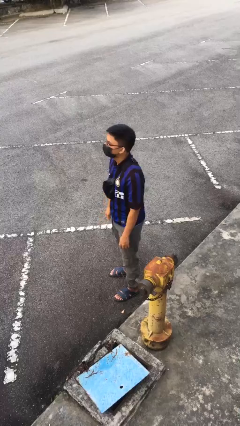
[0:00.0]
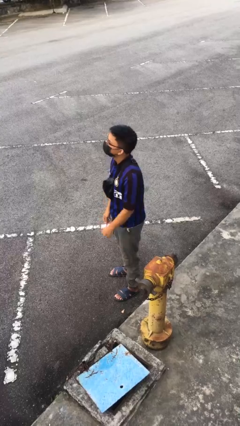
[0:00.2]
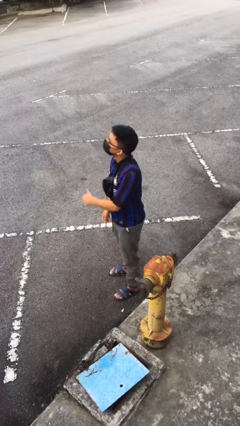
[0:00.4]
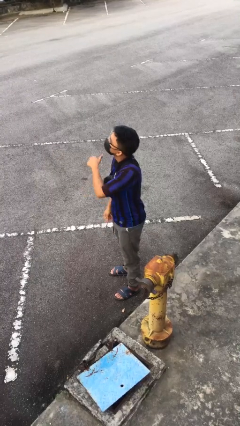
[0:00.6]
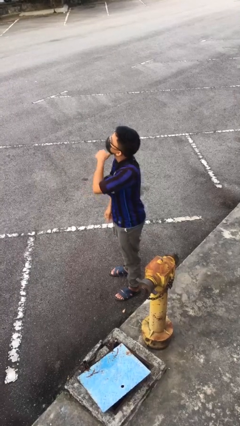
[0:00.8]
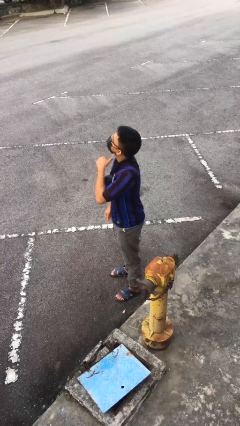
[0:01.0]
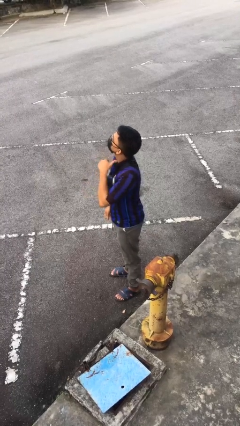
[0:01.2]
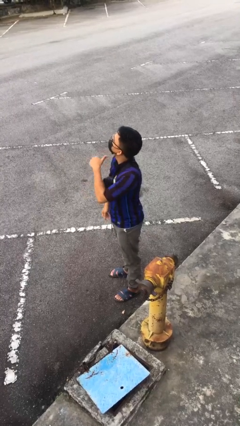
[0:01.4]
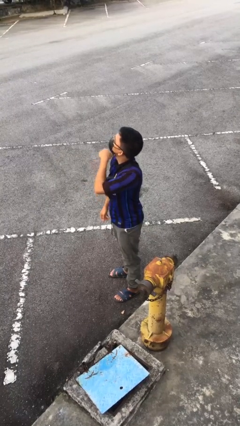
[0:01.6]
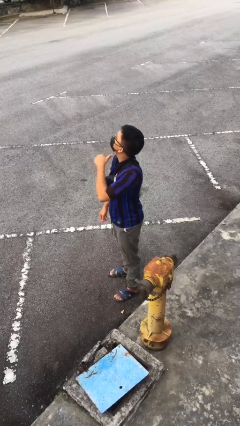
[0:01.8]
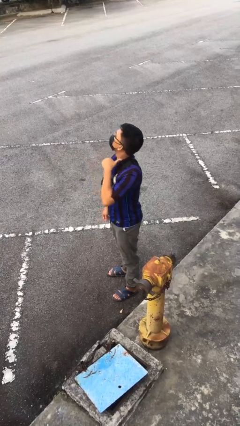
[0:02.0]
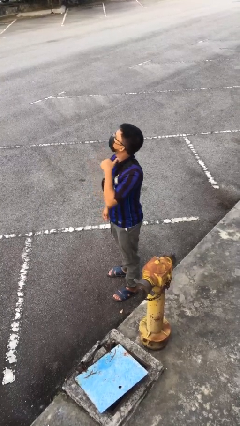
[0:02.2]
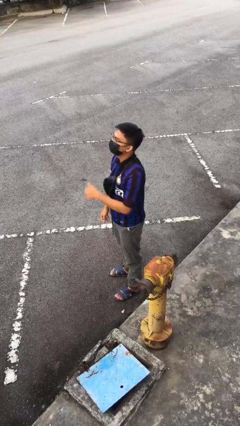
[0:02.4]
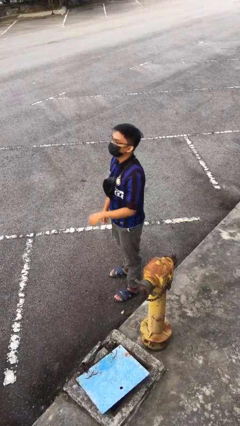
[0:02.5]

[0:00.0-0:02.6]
person gestures cut

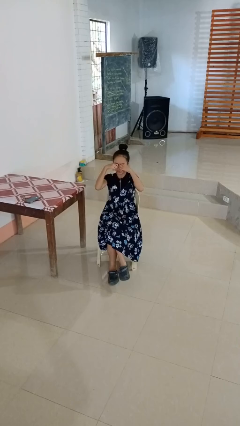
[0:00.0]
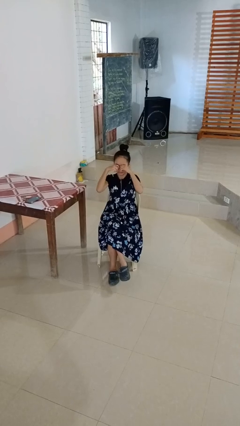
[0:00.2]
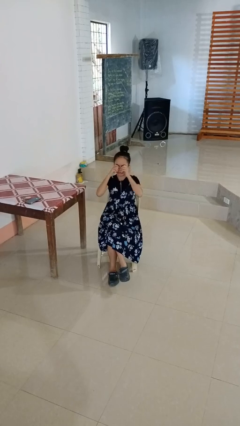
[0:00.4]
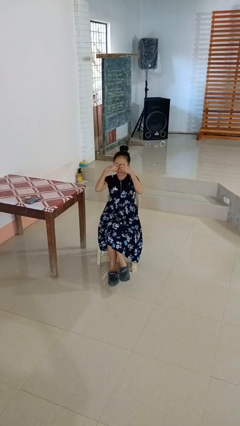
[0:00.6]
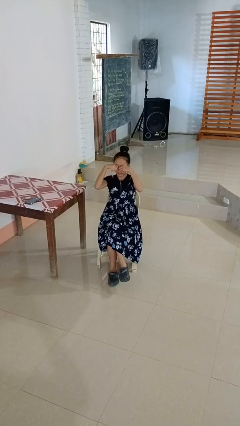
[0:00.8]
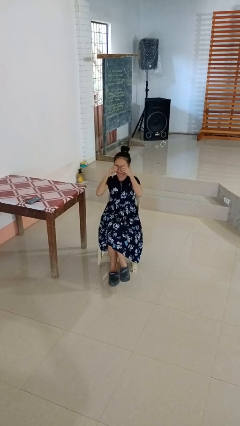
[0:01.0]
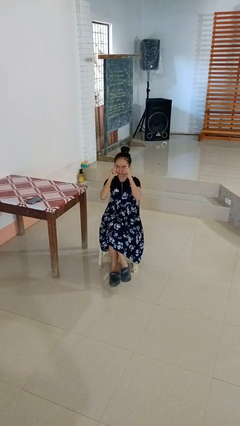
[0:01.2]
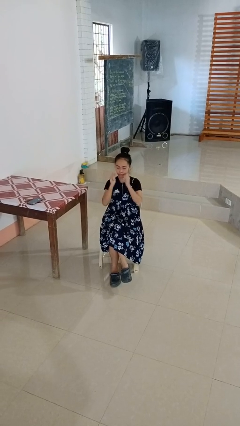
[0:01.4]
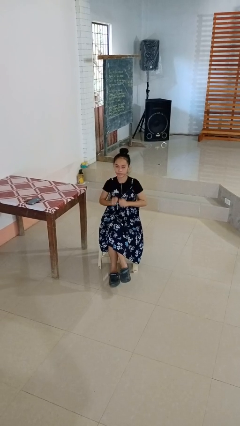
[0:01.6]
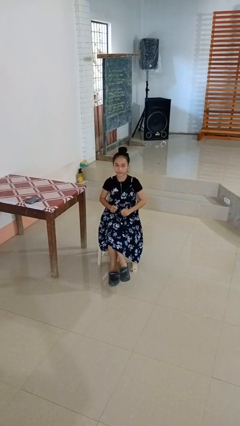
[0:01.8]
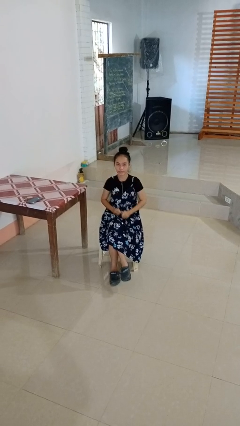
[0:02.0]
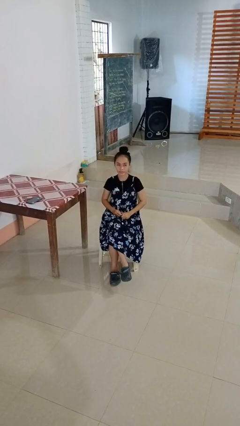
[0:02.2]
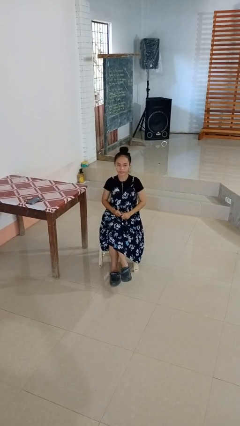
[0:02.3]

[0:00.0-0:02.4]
person rubs eyes

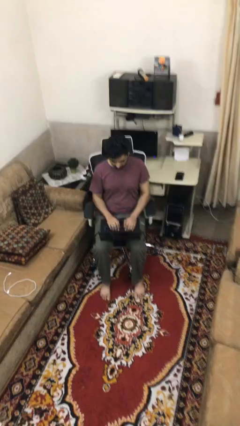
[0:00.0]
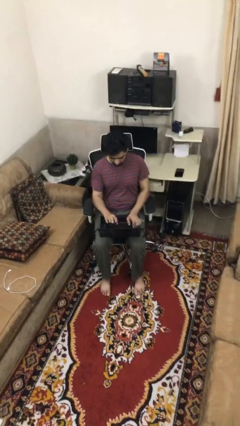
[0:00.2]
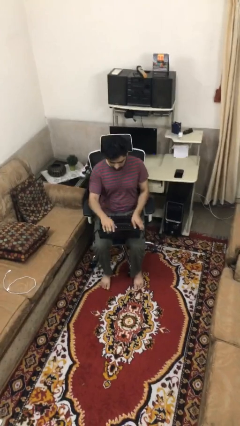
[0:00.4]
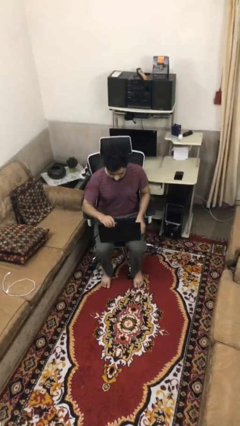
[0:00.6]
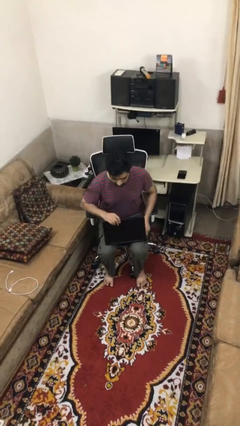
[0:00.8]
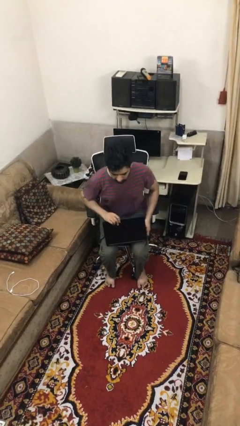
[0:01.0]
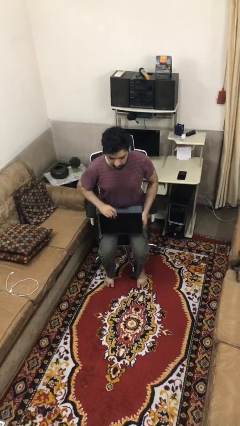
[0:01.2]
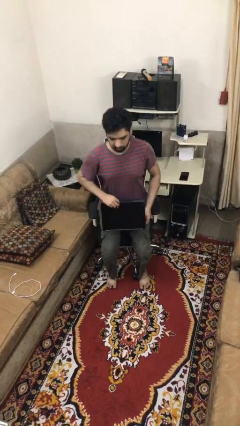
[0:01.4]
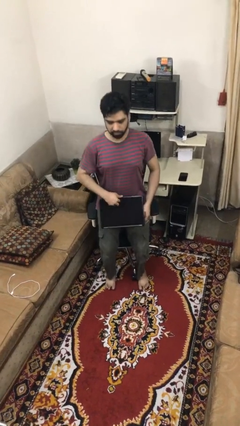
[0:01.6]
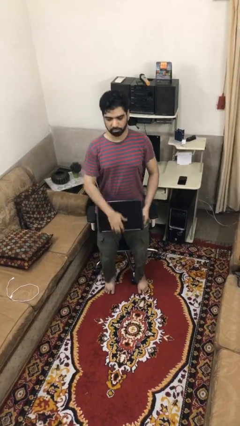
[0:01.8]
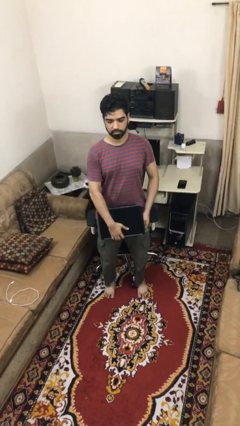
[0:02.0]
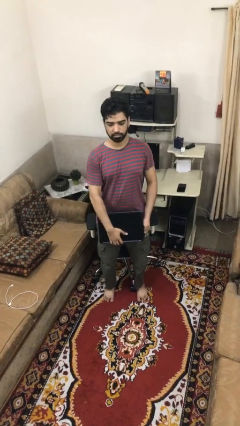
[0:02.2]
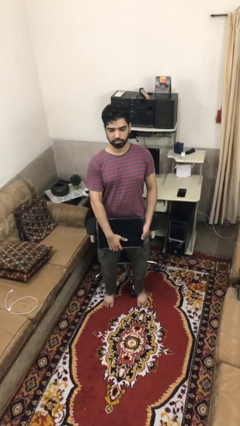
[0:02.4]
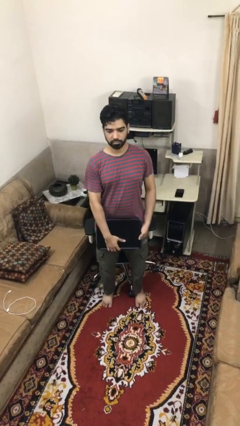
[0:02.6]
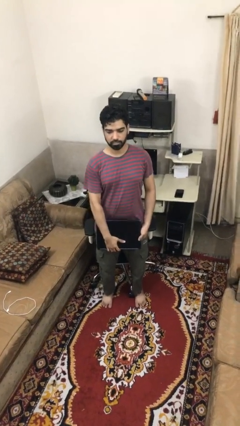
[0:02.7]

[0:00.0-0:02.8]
person stands up

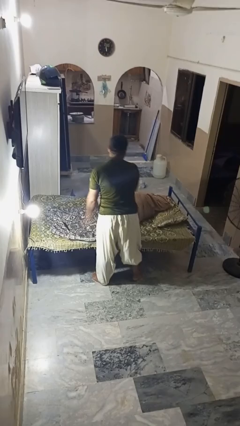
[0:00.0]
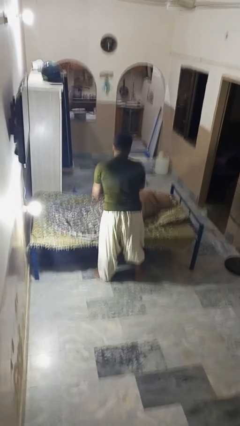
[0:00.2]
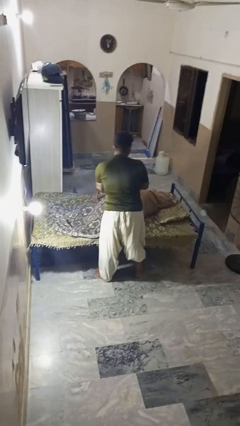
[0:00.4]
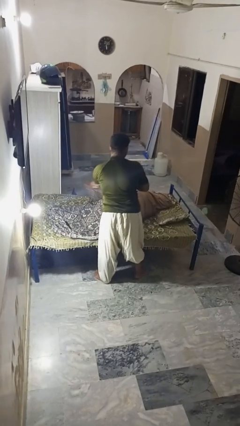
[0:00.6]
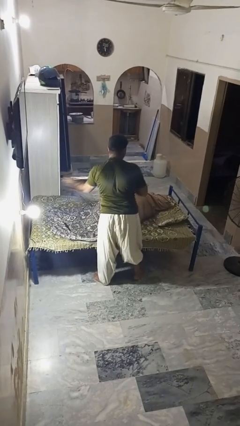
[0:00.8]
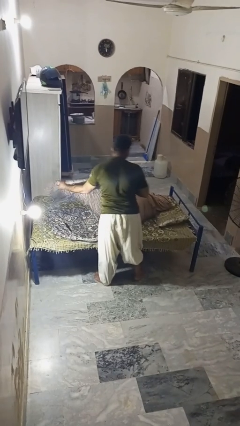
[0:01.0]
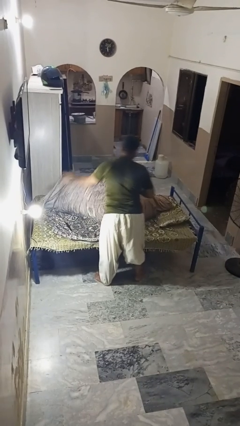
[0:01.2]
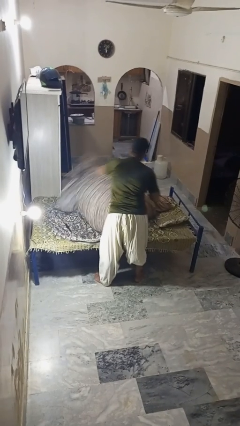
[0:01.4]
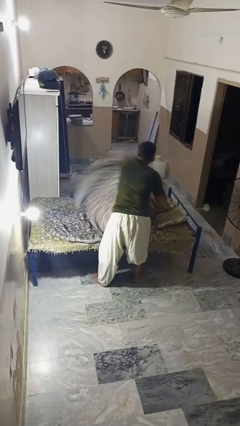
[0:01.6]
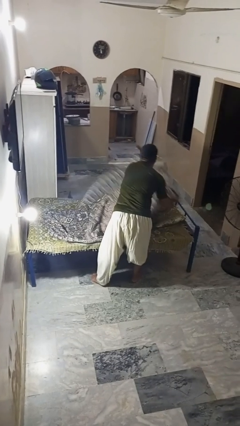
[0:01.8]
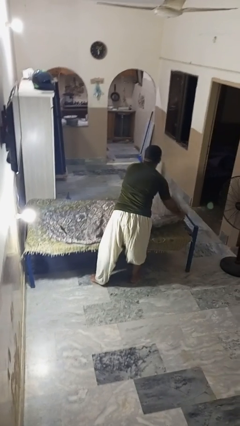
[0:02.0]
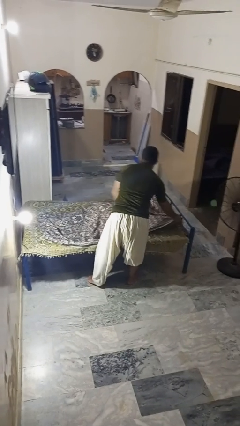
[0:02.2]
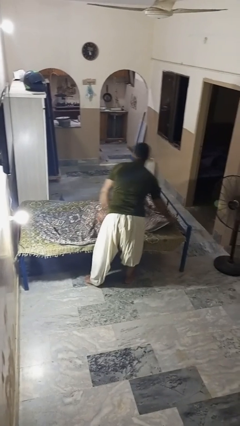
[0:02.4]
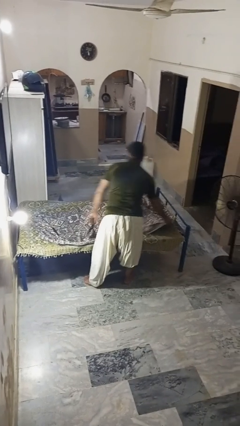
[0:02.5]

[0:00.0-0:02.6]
person covers friend with blanket

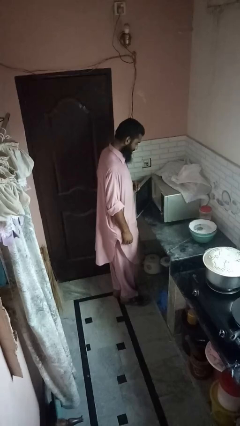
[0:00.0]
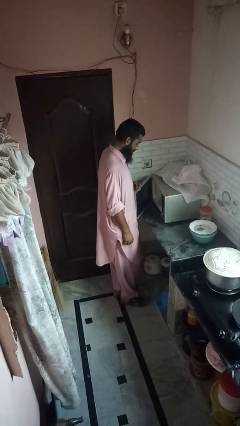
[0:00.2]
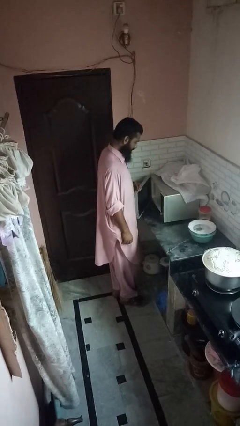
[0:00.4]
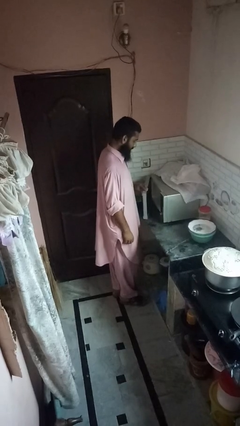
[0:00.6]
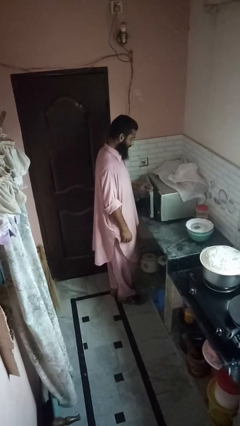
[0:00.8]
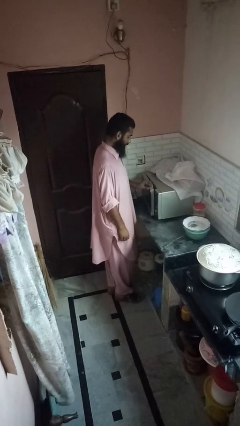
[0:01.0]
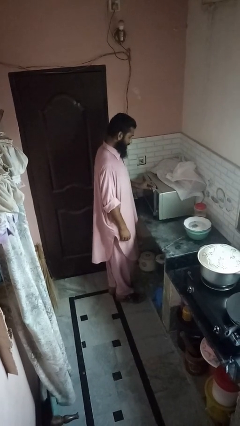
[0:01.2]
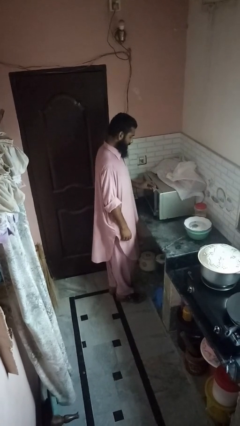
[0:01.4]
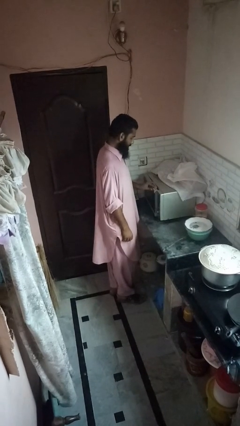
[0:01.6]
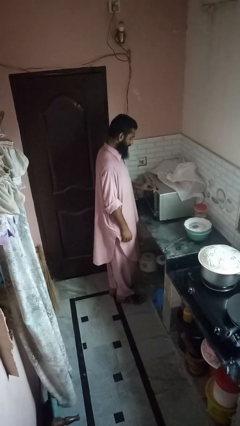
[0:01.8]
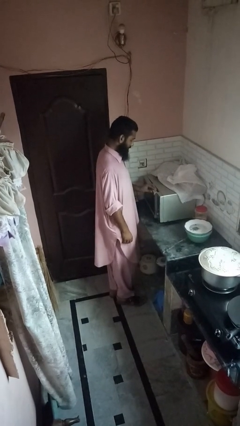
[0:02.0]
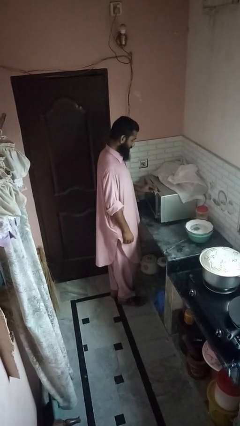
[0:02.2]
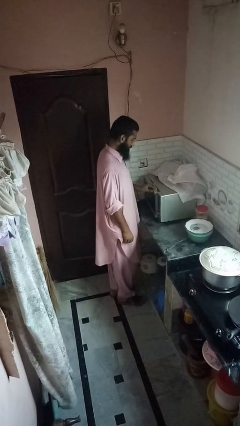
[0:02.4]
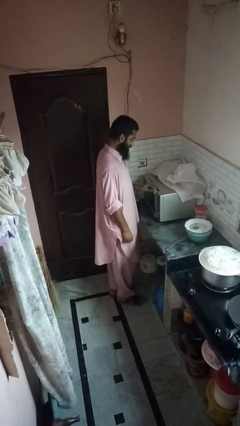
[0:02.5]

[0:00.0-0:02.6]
person closes oven door

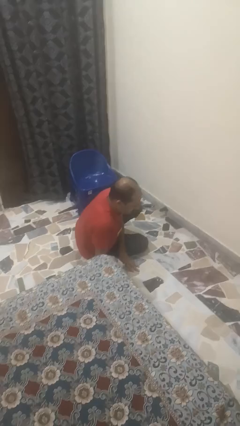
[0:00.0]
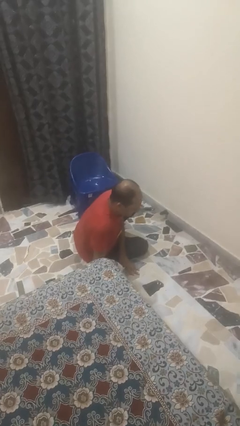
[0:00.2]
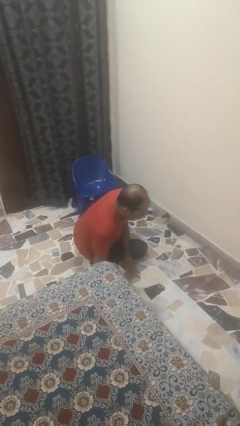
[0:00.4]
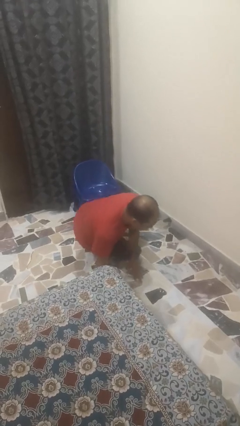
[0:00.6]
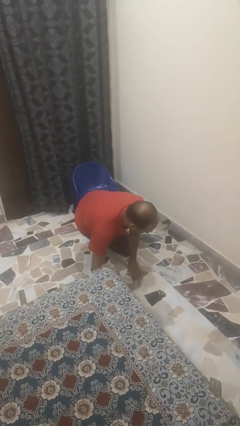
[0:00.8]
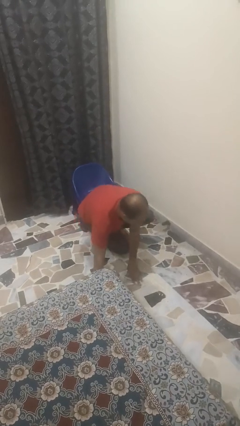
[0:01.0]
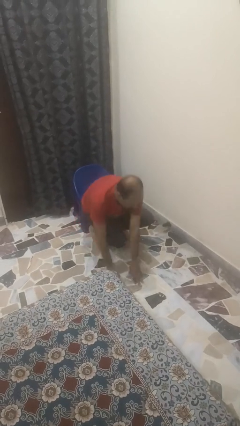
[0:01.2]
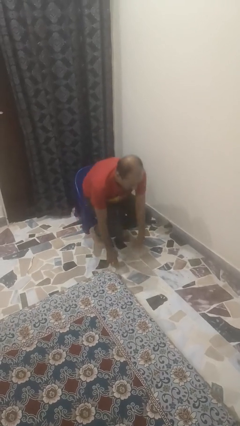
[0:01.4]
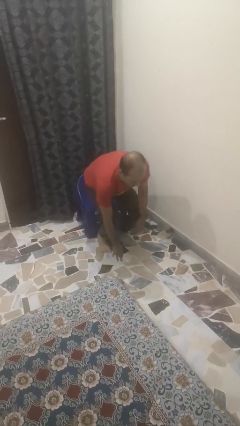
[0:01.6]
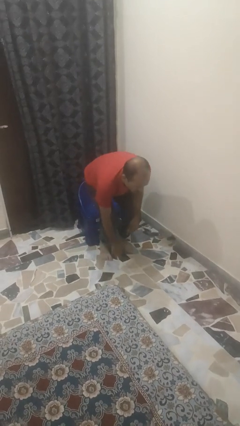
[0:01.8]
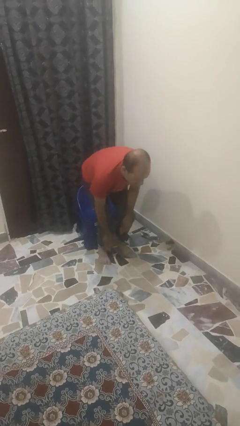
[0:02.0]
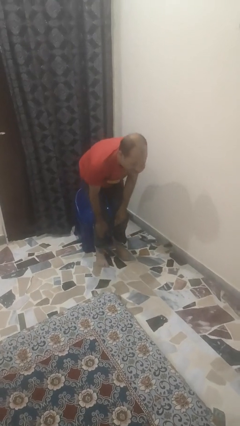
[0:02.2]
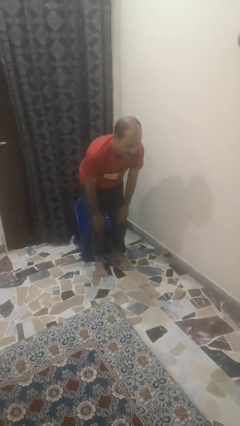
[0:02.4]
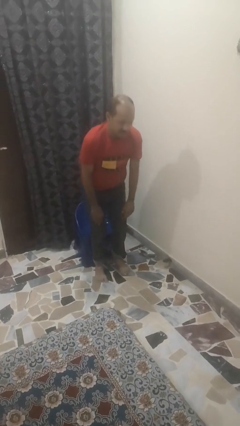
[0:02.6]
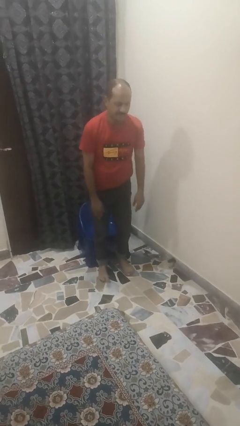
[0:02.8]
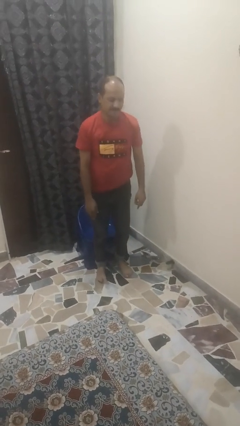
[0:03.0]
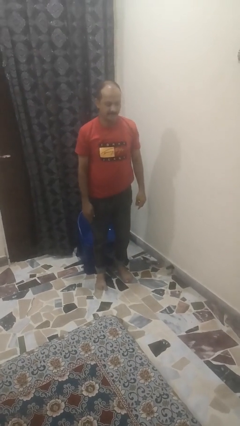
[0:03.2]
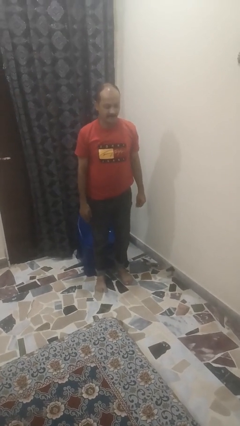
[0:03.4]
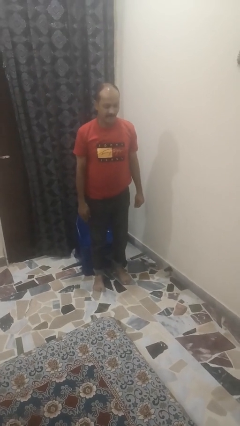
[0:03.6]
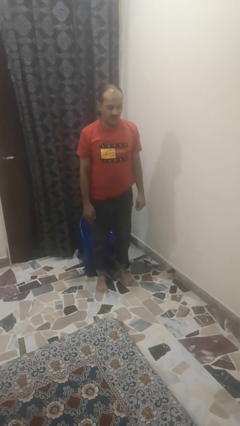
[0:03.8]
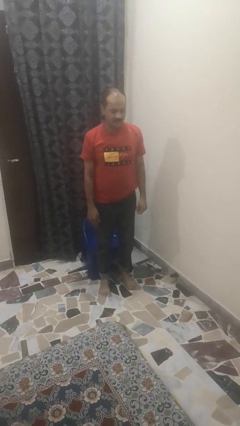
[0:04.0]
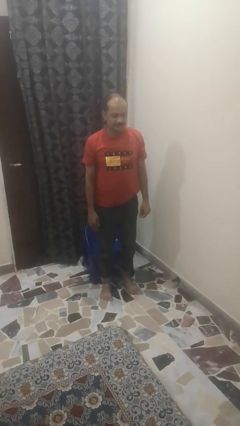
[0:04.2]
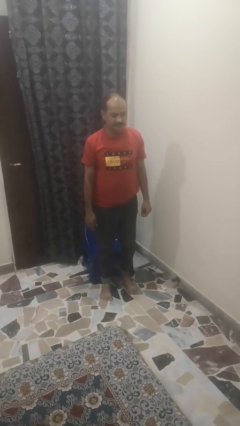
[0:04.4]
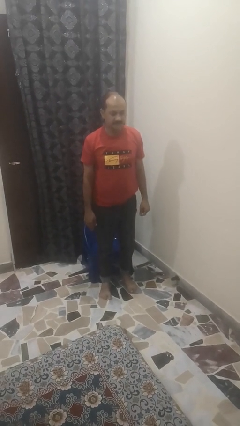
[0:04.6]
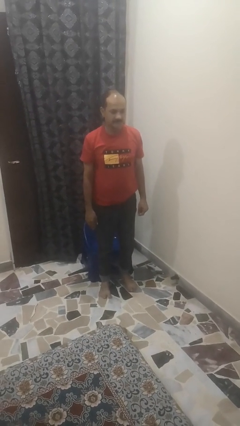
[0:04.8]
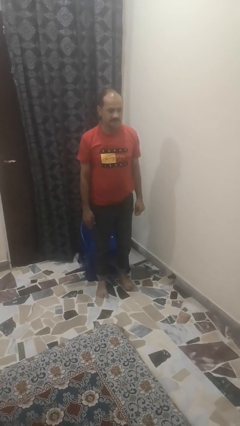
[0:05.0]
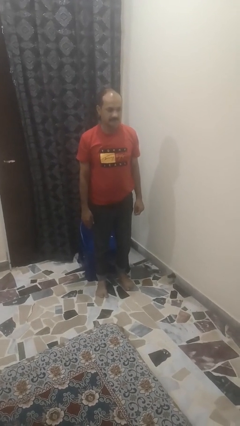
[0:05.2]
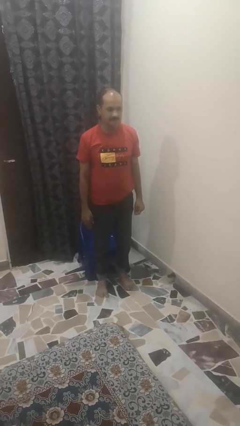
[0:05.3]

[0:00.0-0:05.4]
person stands up from floor
